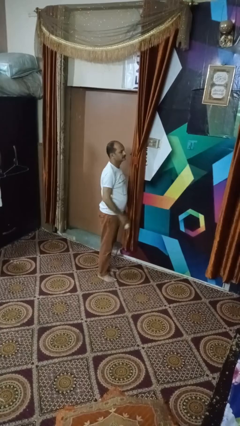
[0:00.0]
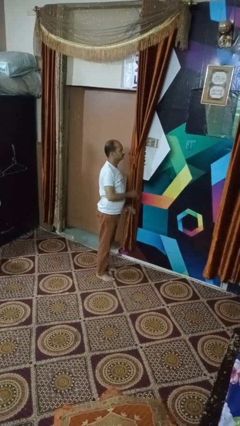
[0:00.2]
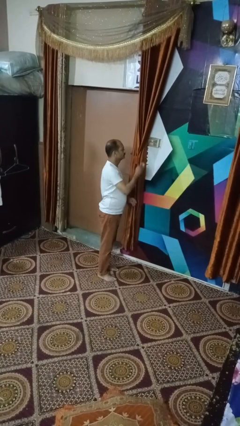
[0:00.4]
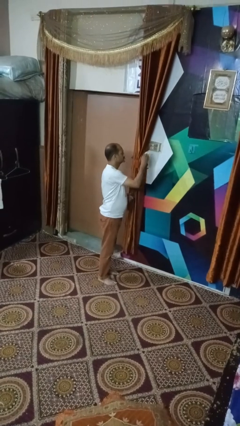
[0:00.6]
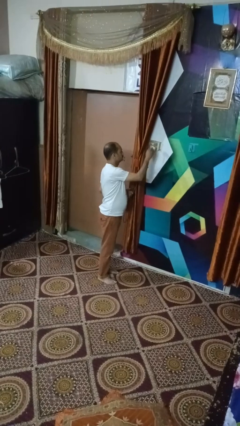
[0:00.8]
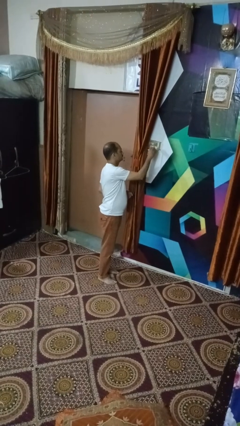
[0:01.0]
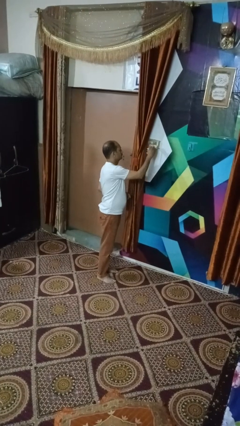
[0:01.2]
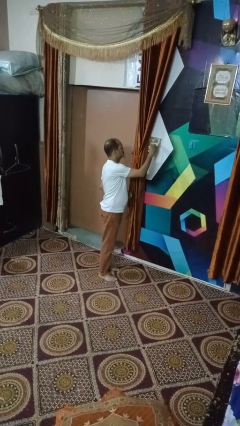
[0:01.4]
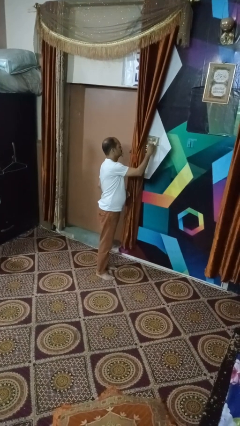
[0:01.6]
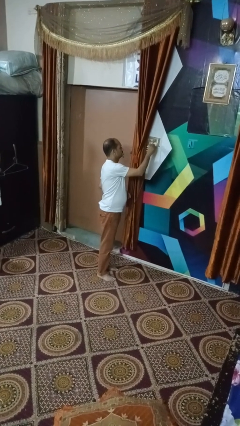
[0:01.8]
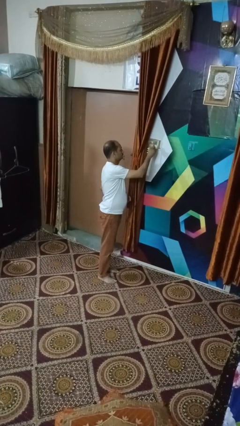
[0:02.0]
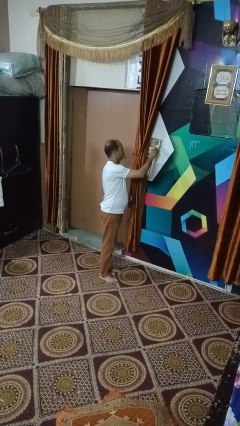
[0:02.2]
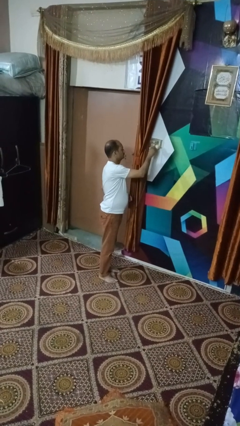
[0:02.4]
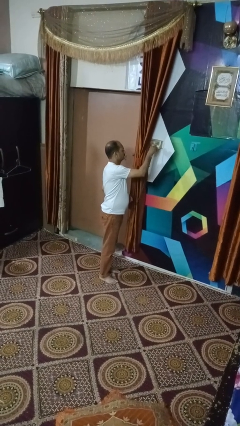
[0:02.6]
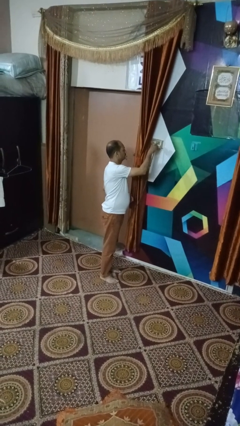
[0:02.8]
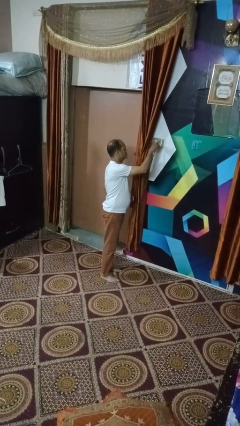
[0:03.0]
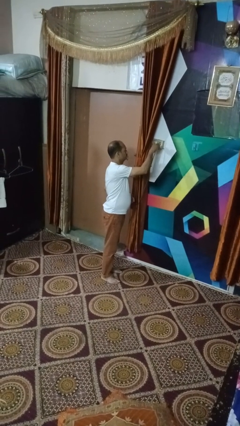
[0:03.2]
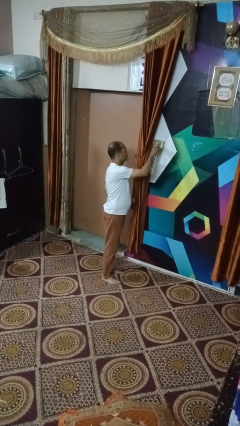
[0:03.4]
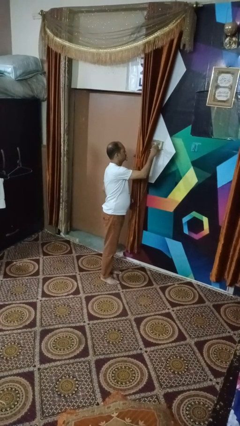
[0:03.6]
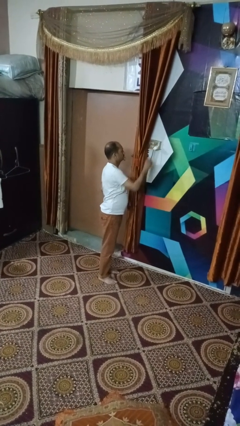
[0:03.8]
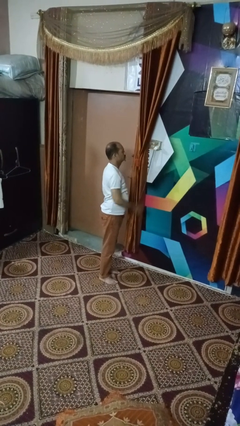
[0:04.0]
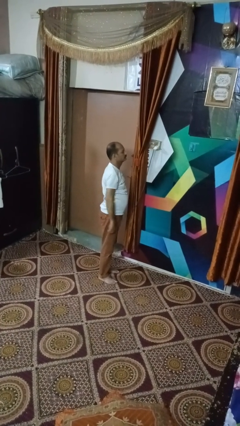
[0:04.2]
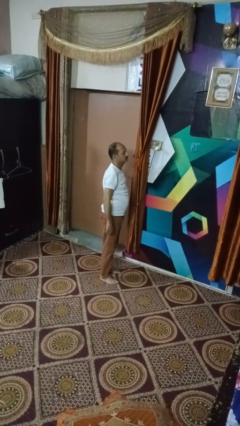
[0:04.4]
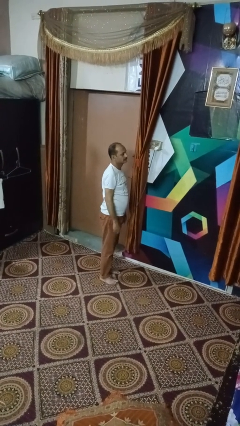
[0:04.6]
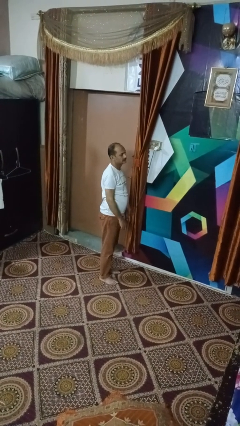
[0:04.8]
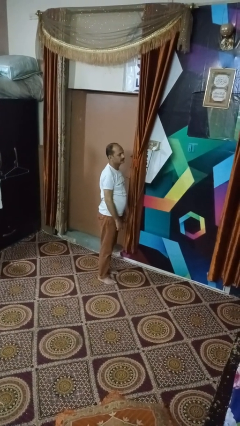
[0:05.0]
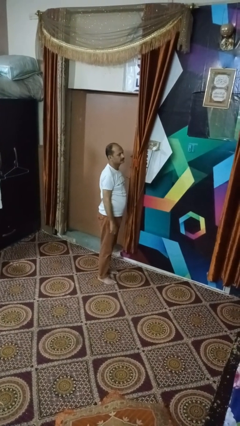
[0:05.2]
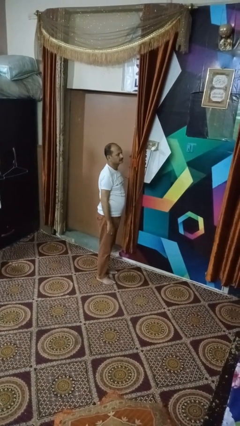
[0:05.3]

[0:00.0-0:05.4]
person plugs into electrical socket

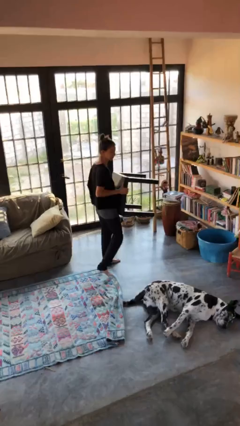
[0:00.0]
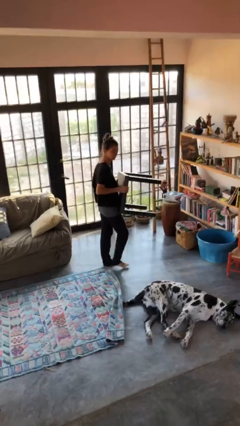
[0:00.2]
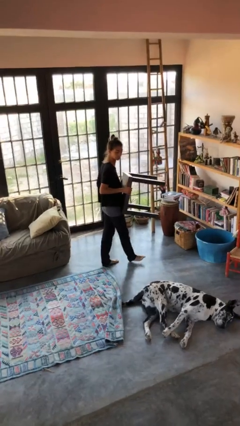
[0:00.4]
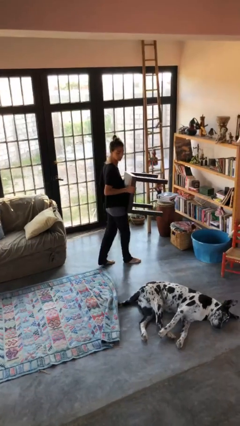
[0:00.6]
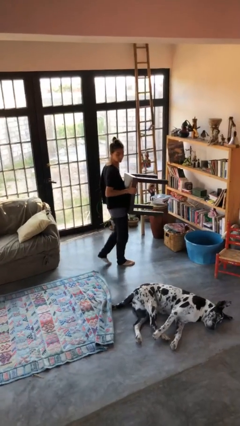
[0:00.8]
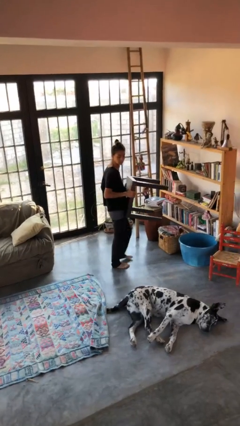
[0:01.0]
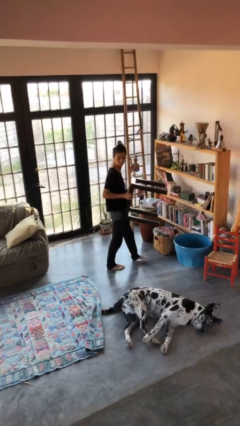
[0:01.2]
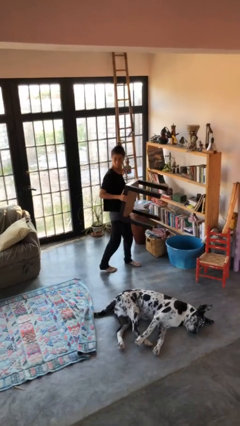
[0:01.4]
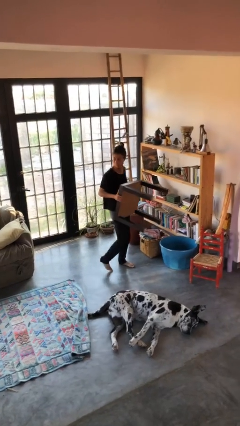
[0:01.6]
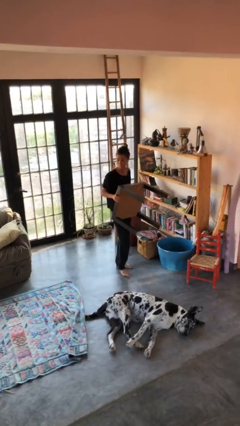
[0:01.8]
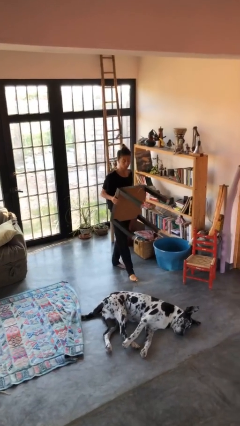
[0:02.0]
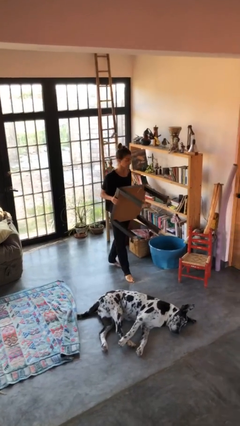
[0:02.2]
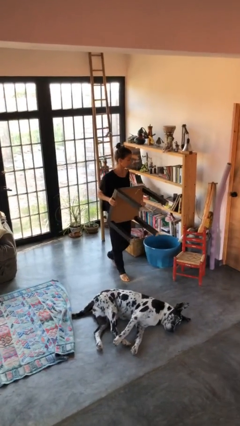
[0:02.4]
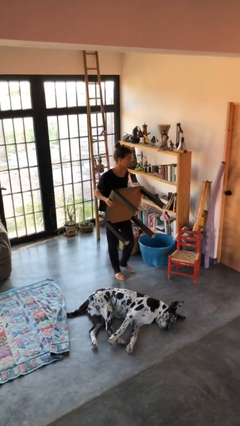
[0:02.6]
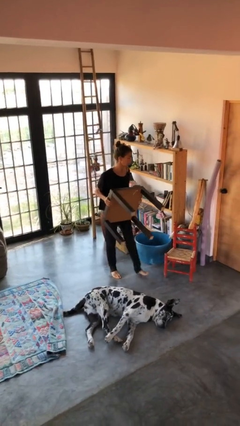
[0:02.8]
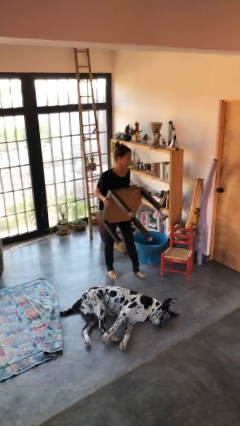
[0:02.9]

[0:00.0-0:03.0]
person carries furniture

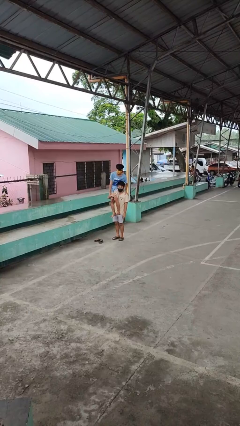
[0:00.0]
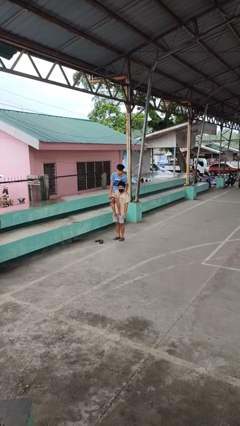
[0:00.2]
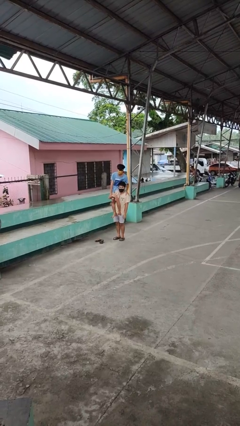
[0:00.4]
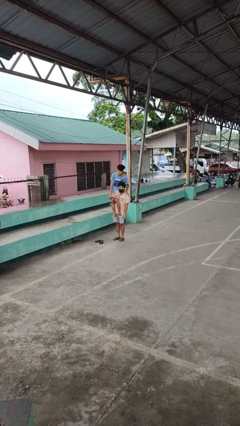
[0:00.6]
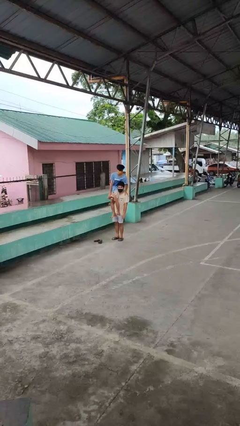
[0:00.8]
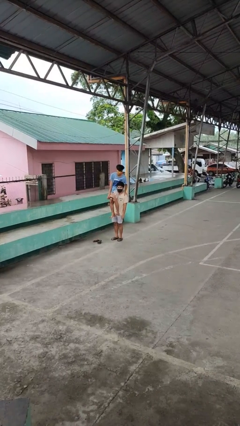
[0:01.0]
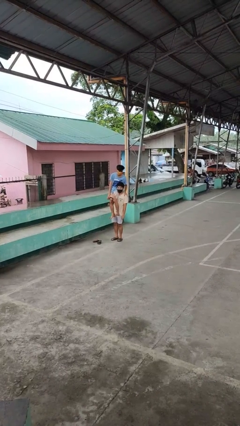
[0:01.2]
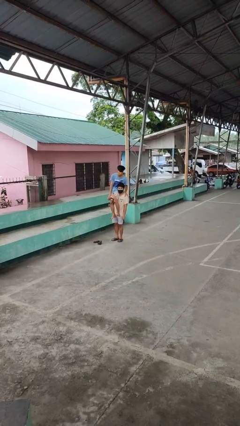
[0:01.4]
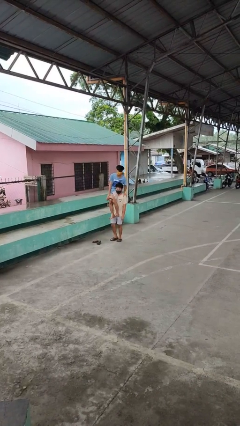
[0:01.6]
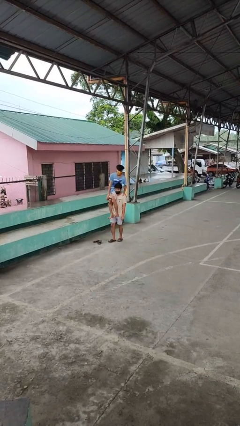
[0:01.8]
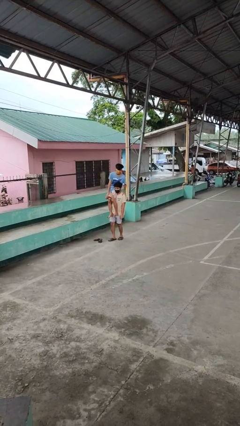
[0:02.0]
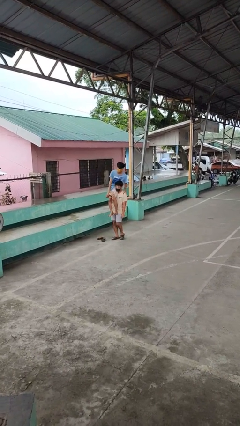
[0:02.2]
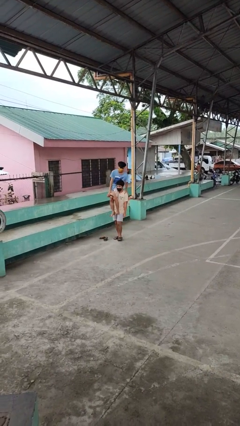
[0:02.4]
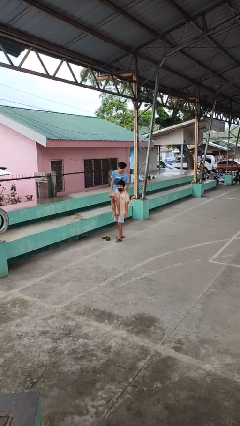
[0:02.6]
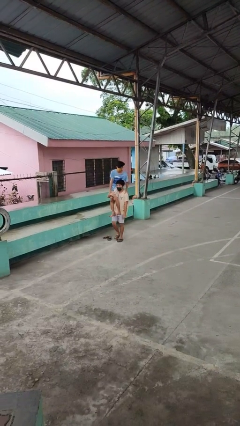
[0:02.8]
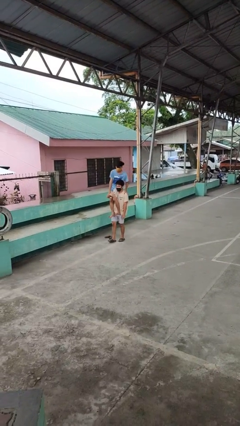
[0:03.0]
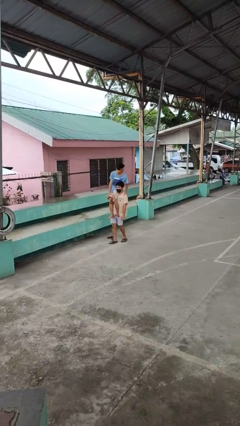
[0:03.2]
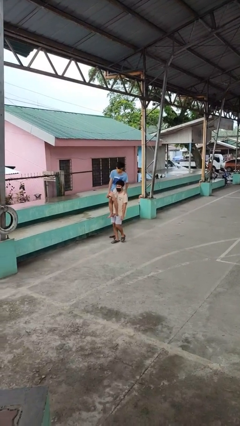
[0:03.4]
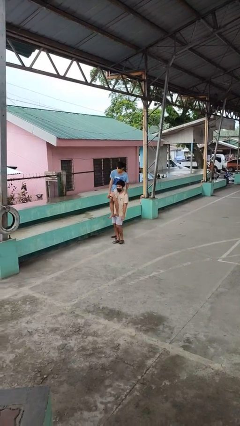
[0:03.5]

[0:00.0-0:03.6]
person carries person on shoulders

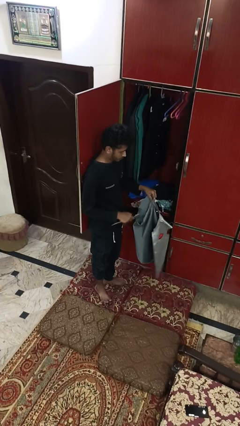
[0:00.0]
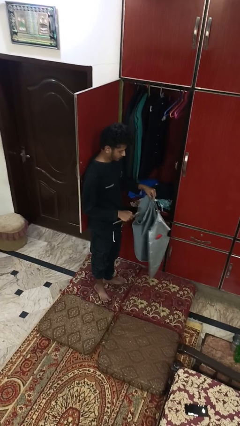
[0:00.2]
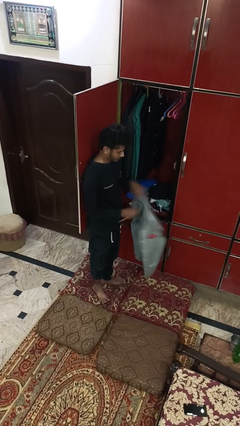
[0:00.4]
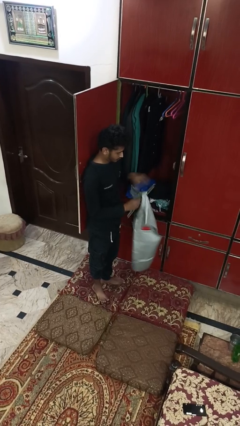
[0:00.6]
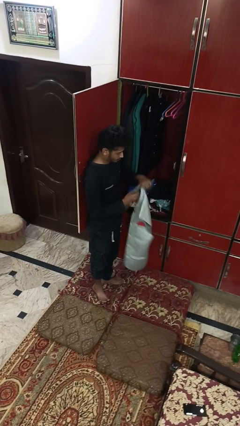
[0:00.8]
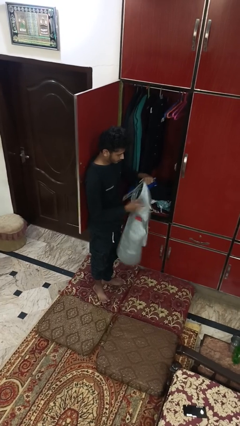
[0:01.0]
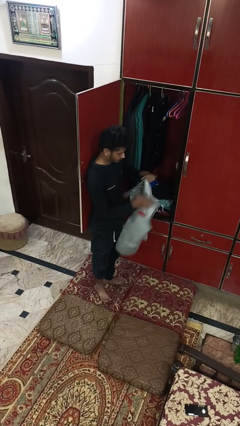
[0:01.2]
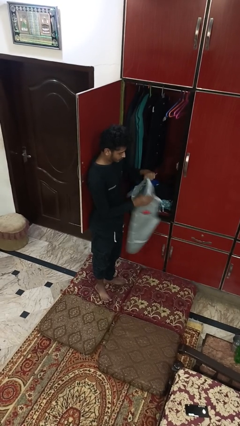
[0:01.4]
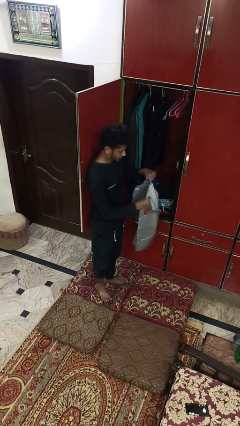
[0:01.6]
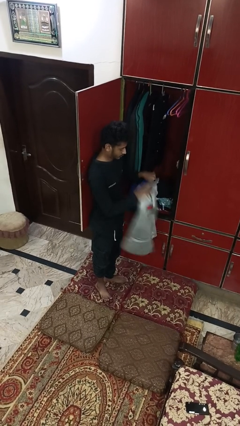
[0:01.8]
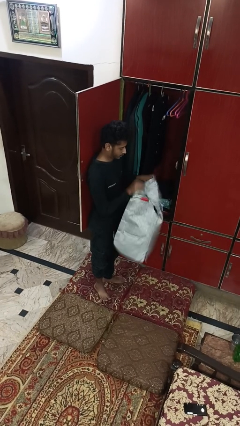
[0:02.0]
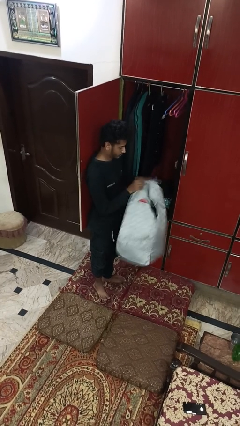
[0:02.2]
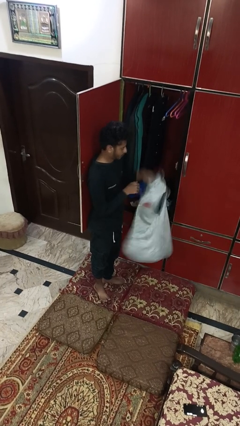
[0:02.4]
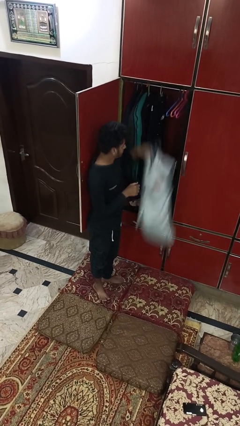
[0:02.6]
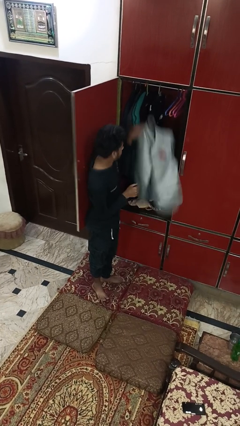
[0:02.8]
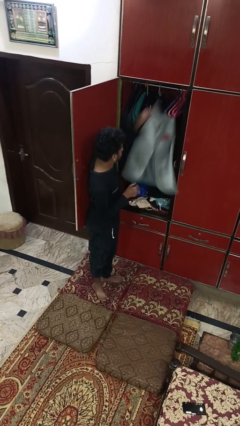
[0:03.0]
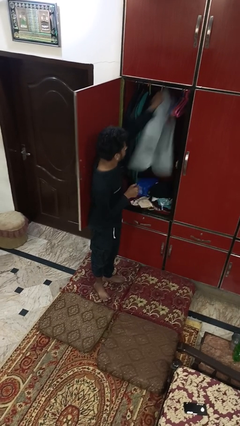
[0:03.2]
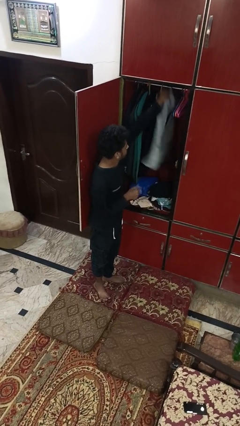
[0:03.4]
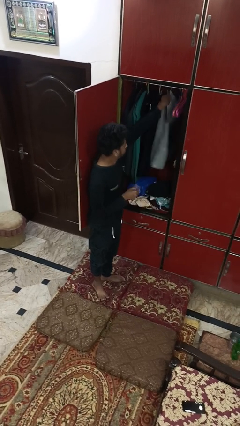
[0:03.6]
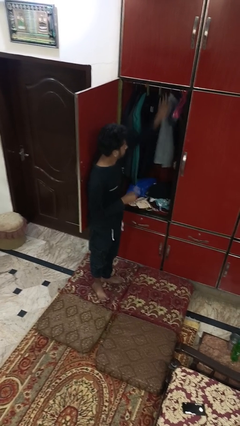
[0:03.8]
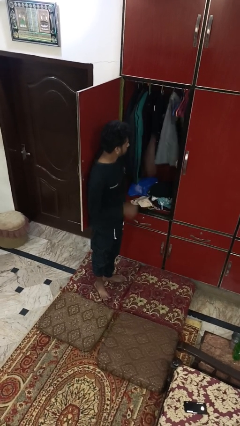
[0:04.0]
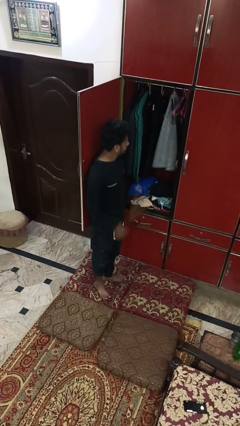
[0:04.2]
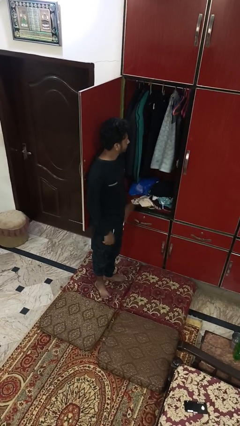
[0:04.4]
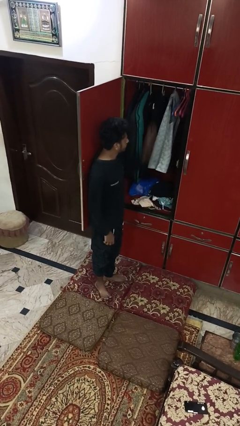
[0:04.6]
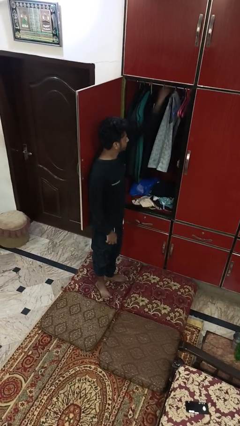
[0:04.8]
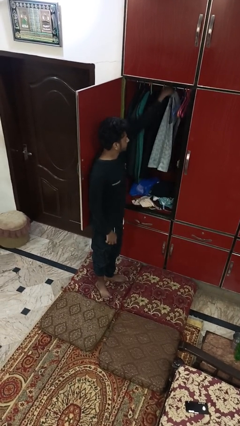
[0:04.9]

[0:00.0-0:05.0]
person puts clothes into closet

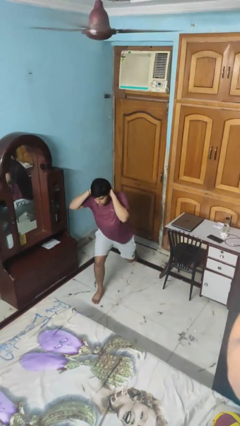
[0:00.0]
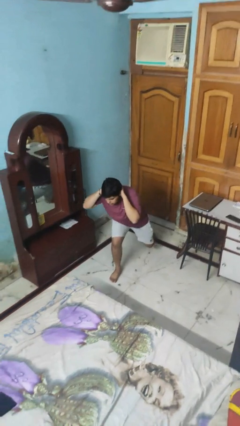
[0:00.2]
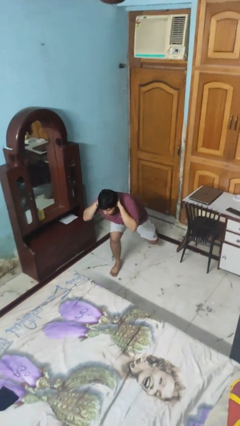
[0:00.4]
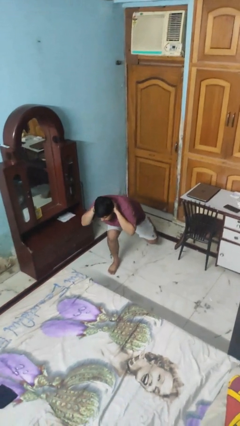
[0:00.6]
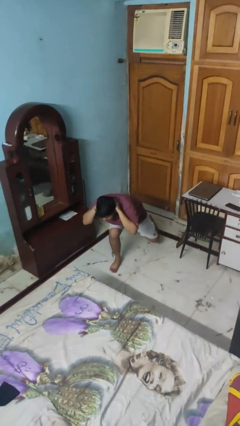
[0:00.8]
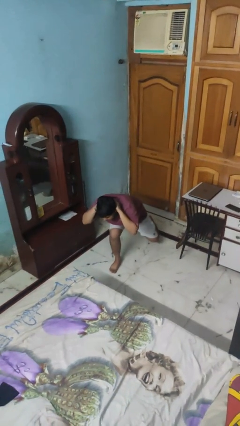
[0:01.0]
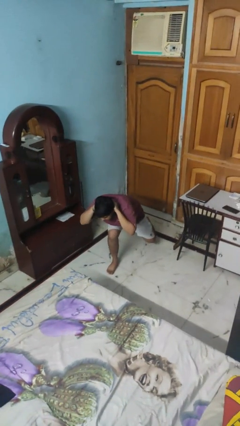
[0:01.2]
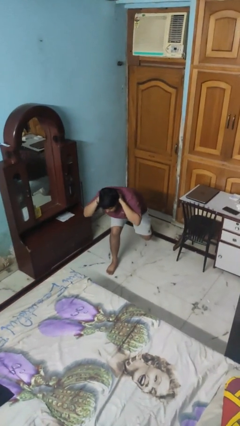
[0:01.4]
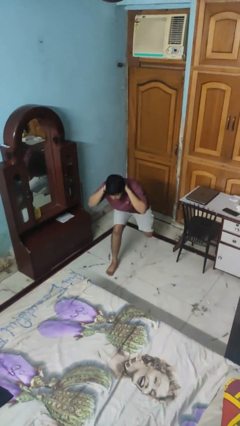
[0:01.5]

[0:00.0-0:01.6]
person exercises with lunges
